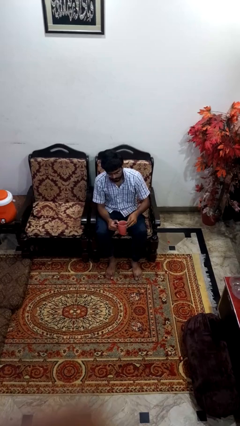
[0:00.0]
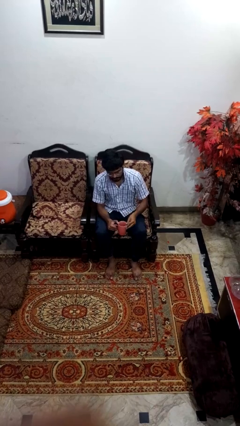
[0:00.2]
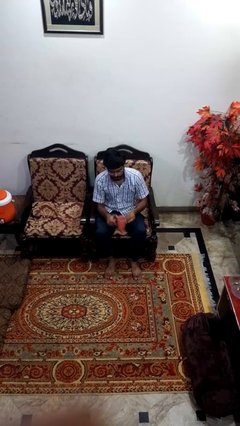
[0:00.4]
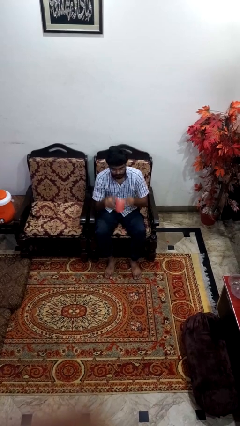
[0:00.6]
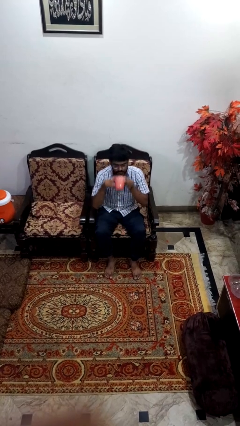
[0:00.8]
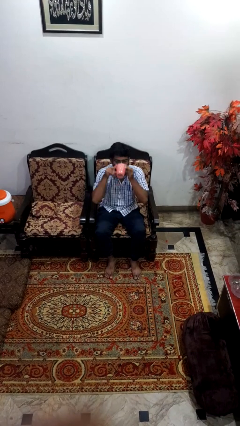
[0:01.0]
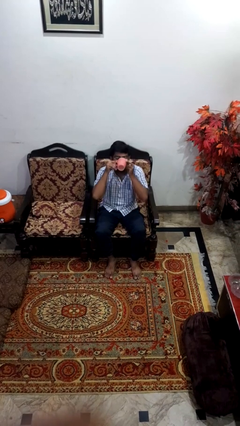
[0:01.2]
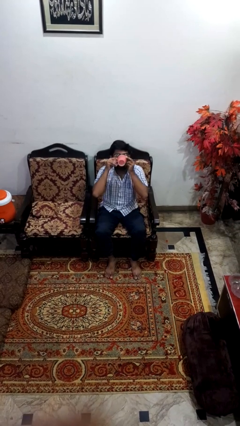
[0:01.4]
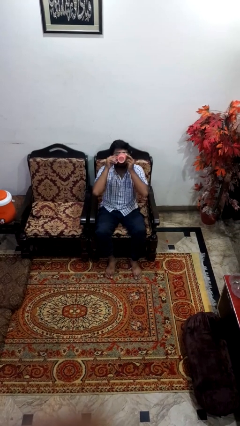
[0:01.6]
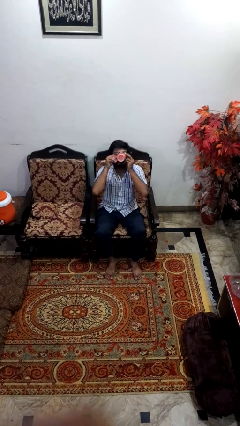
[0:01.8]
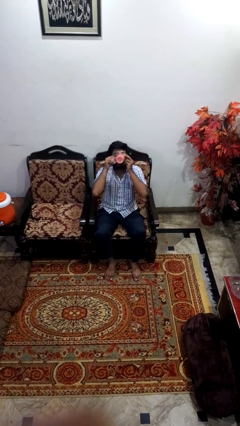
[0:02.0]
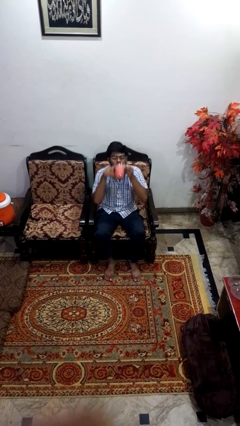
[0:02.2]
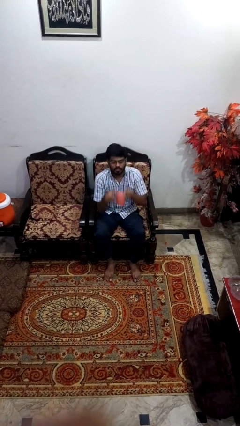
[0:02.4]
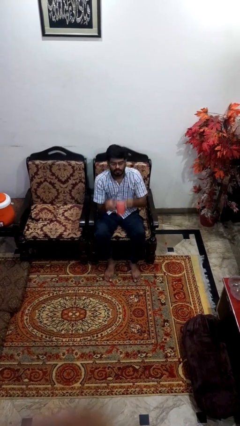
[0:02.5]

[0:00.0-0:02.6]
person drinks from mug

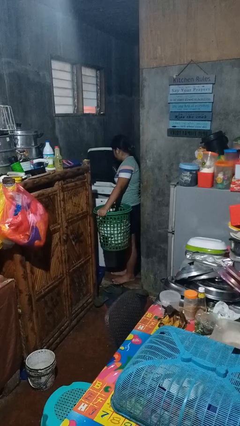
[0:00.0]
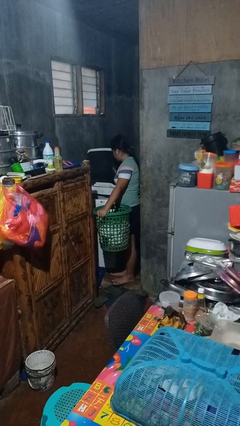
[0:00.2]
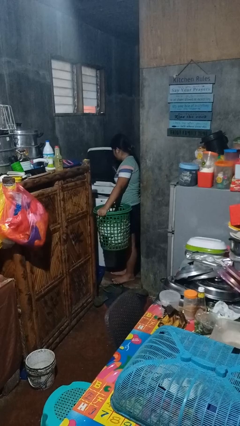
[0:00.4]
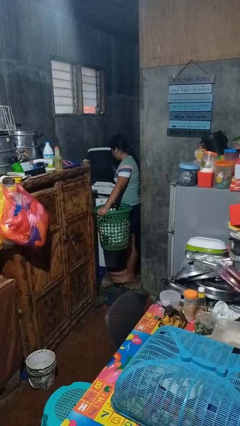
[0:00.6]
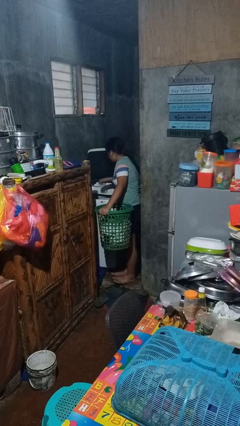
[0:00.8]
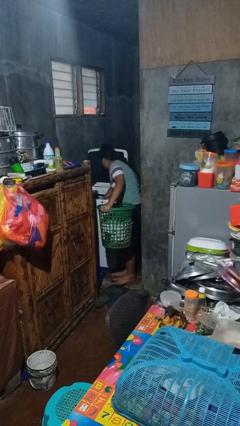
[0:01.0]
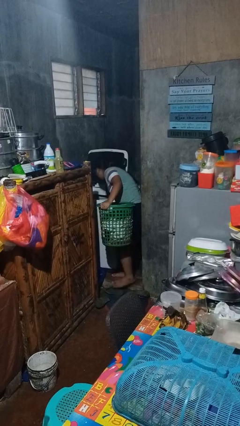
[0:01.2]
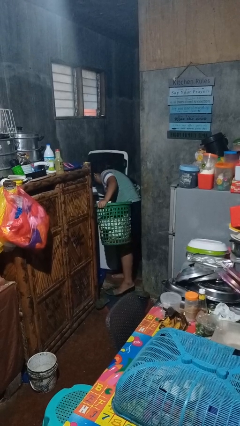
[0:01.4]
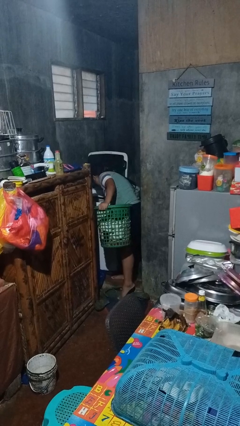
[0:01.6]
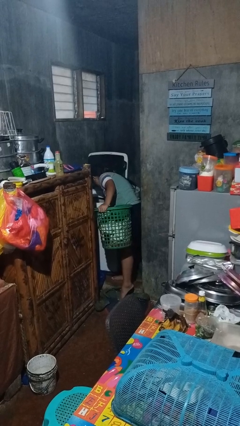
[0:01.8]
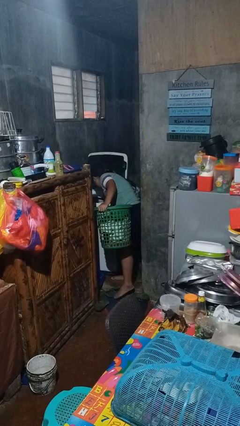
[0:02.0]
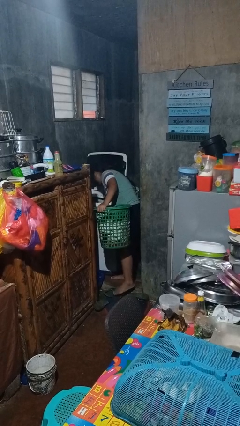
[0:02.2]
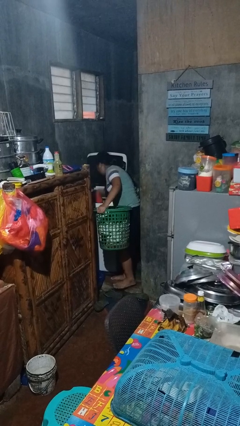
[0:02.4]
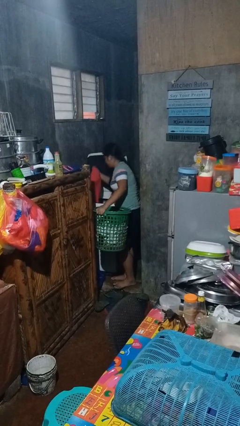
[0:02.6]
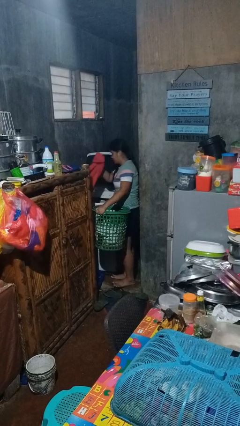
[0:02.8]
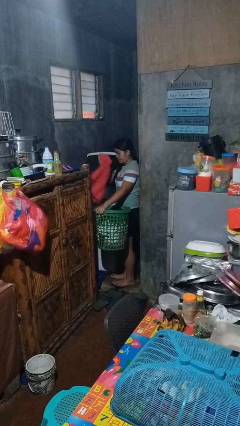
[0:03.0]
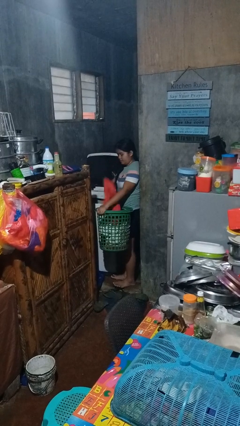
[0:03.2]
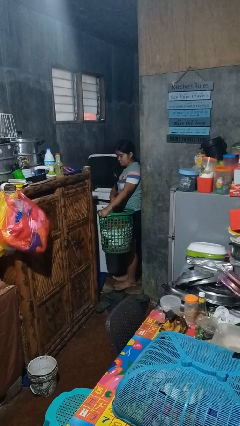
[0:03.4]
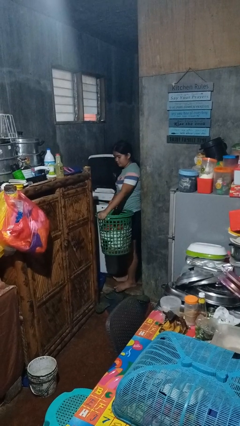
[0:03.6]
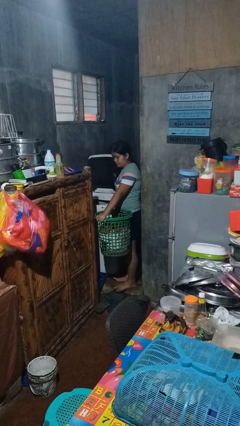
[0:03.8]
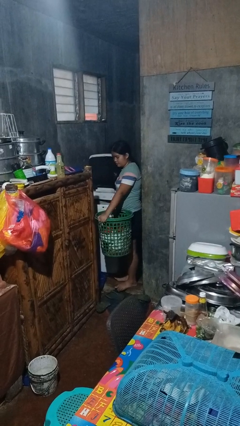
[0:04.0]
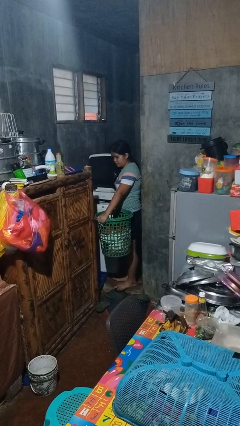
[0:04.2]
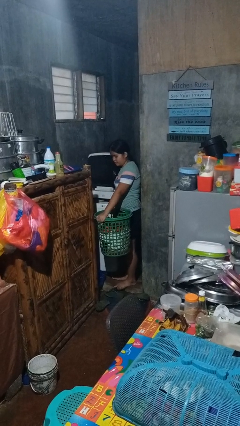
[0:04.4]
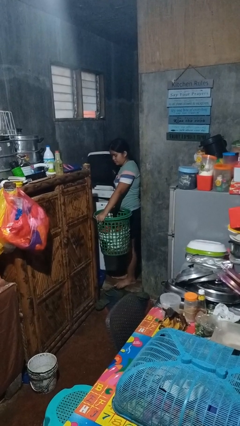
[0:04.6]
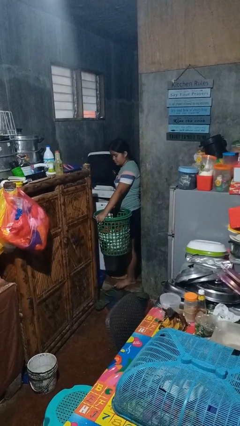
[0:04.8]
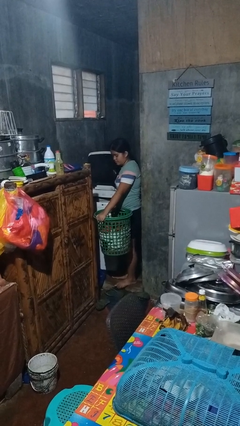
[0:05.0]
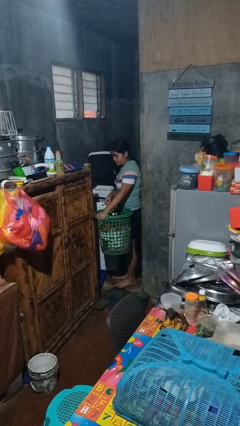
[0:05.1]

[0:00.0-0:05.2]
person unloads clotheswasher

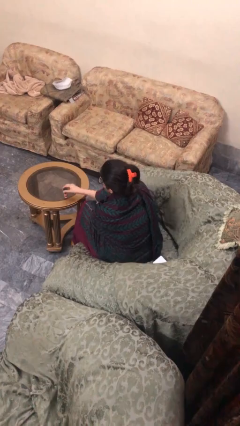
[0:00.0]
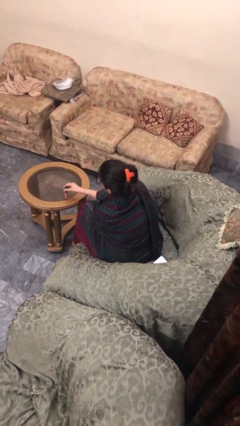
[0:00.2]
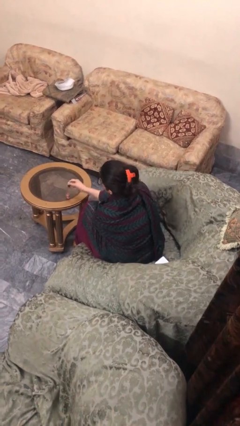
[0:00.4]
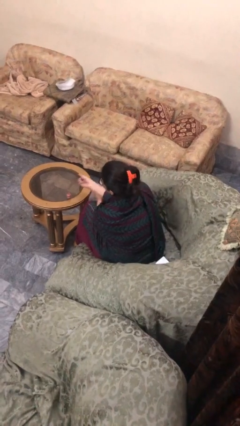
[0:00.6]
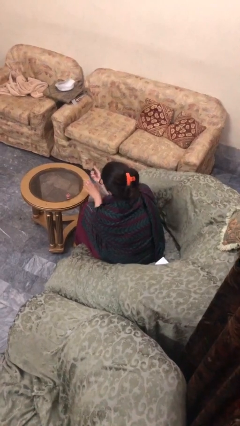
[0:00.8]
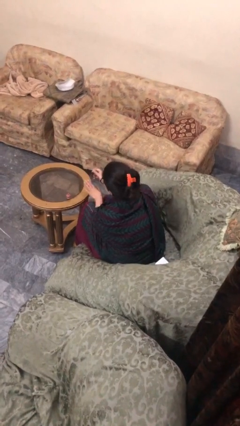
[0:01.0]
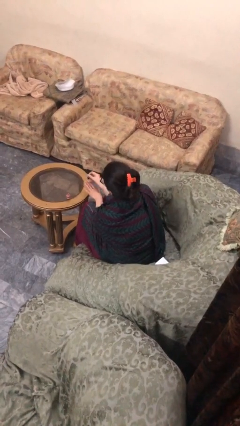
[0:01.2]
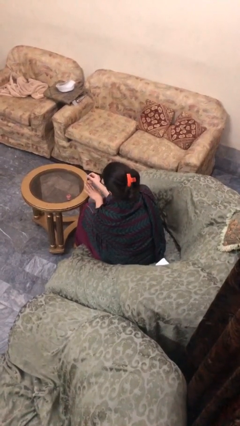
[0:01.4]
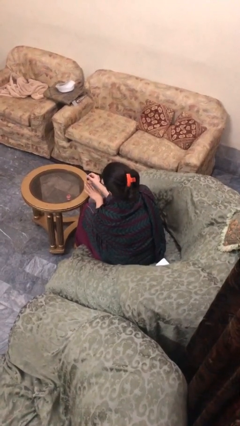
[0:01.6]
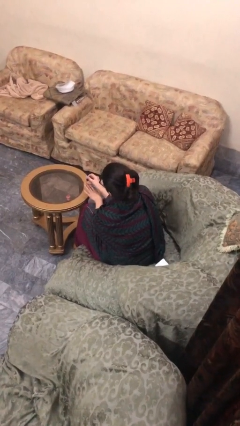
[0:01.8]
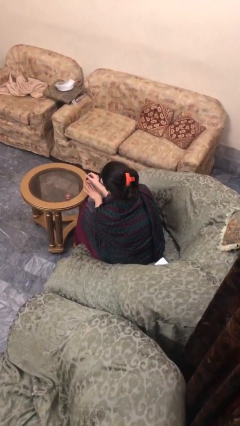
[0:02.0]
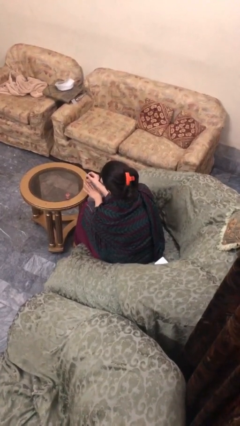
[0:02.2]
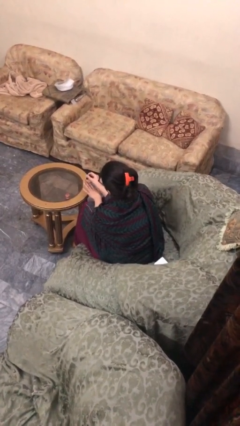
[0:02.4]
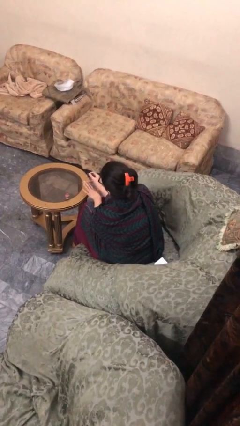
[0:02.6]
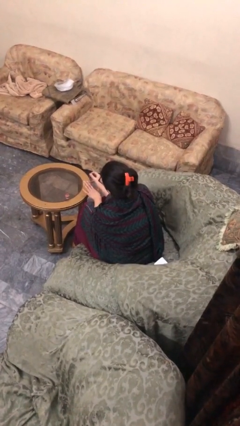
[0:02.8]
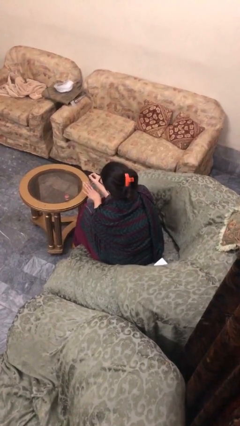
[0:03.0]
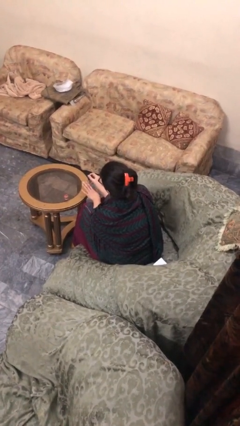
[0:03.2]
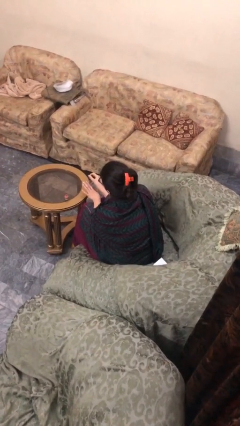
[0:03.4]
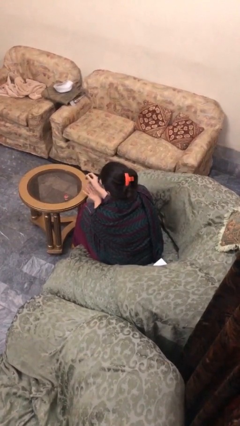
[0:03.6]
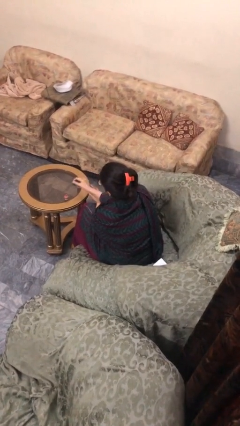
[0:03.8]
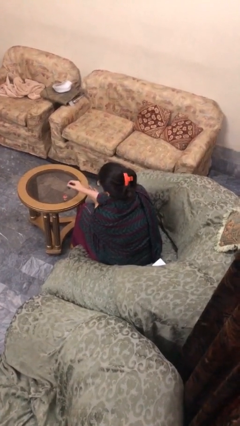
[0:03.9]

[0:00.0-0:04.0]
person paints fingernails

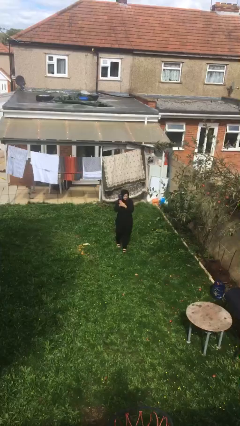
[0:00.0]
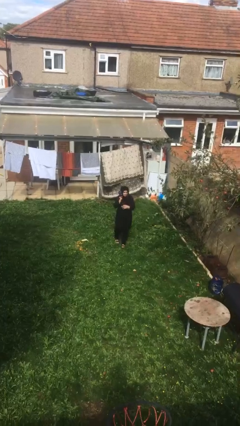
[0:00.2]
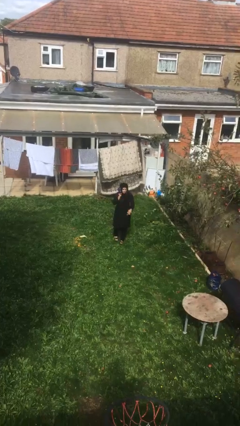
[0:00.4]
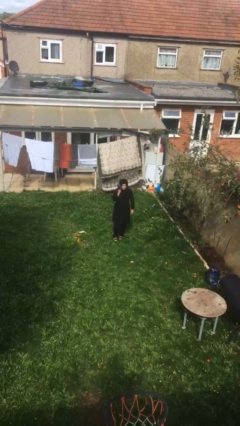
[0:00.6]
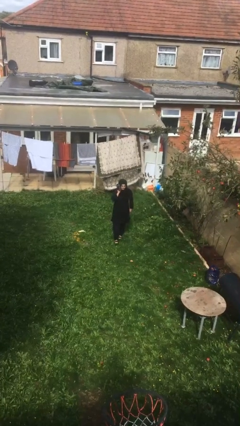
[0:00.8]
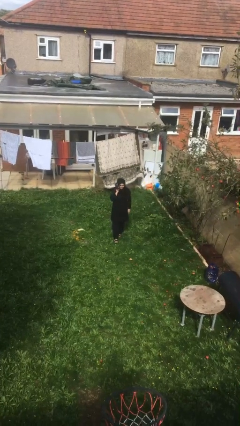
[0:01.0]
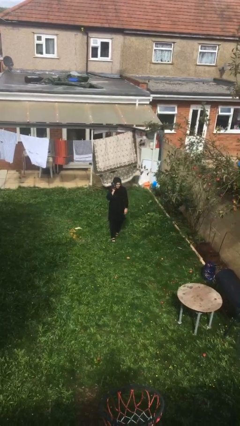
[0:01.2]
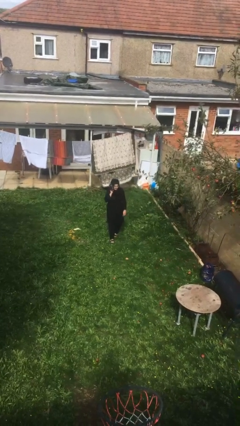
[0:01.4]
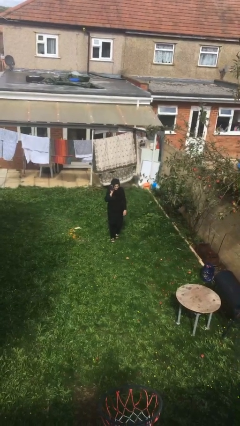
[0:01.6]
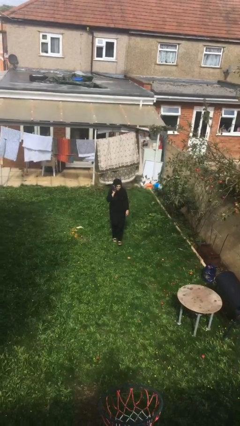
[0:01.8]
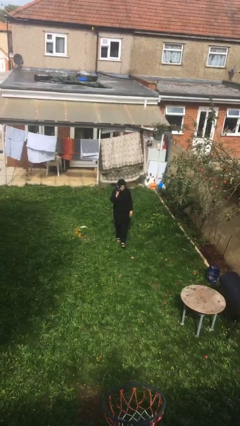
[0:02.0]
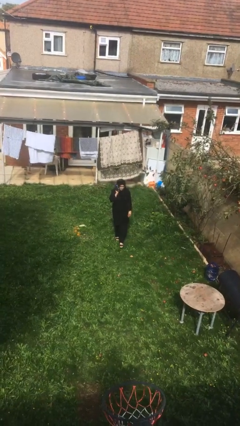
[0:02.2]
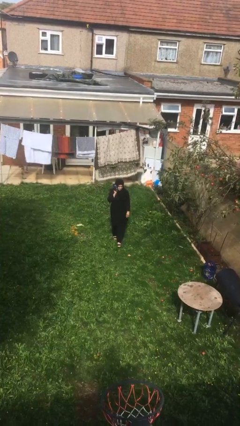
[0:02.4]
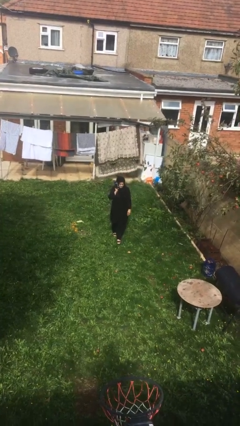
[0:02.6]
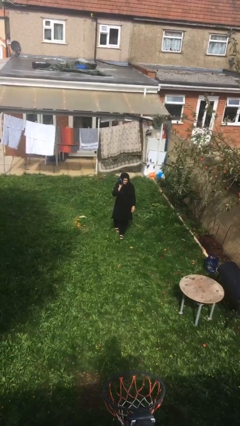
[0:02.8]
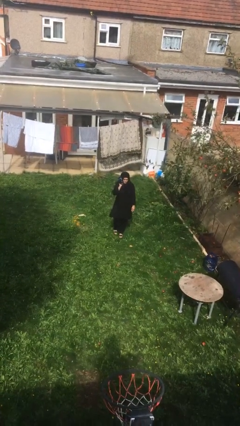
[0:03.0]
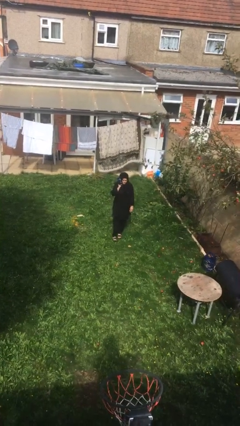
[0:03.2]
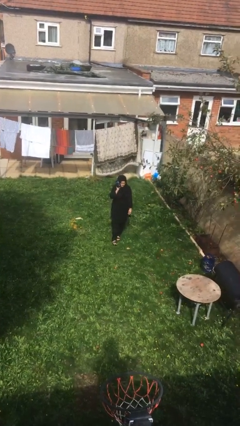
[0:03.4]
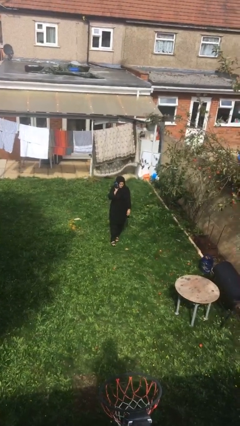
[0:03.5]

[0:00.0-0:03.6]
person talks on phone

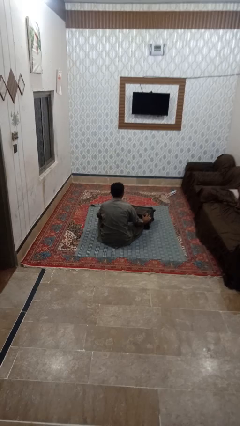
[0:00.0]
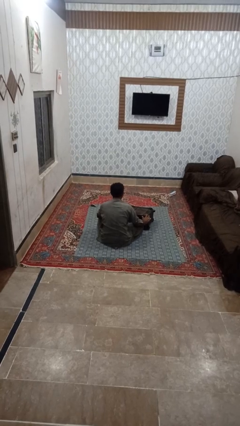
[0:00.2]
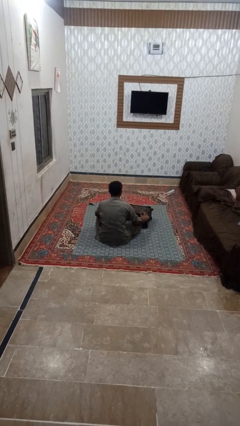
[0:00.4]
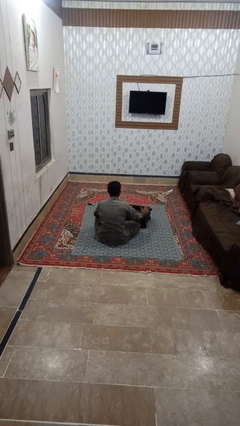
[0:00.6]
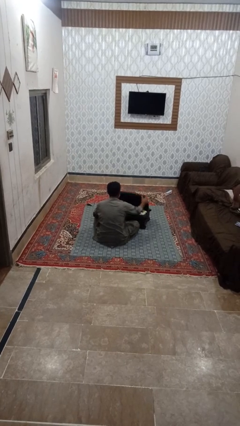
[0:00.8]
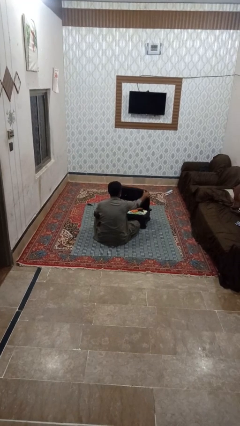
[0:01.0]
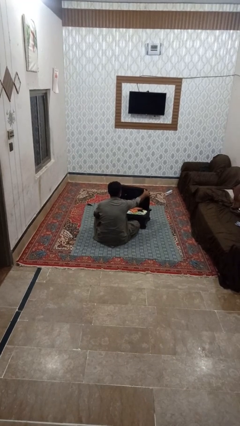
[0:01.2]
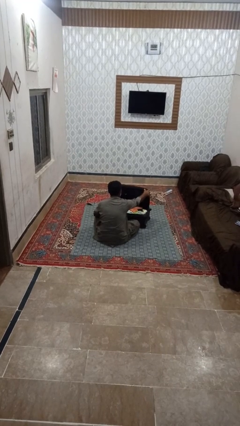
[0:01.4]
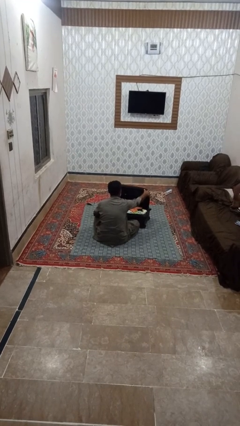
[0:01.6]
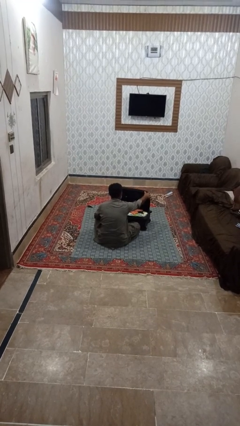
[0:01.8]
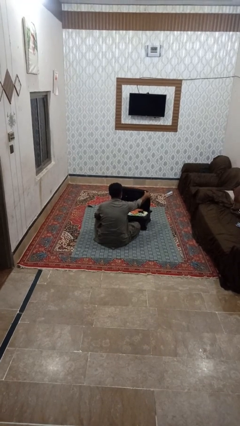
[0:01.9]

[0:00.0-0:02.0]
person opens suitcase
